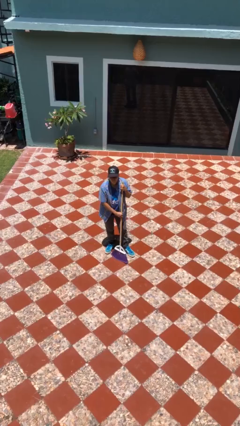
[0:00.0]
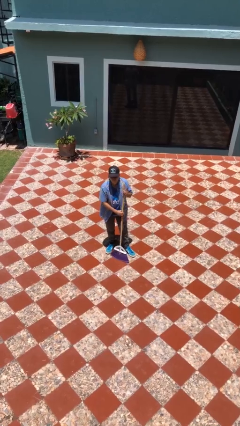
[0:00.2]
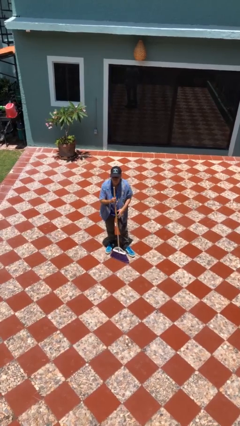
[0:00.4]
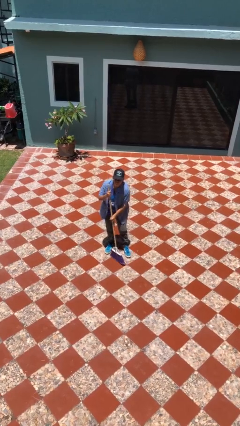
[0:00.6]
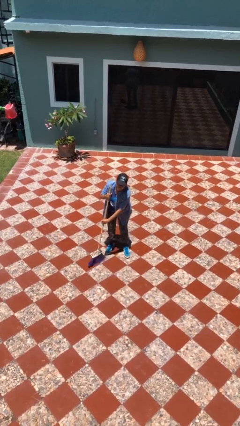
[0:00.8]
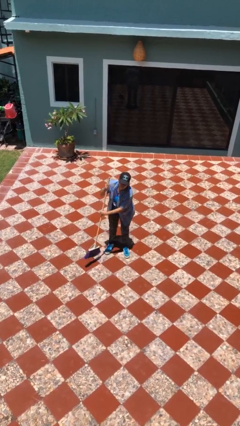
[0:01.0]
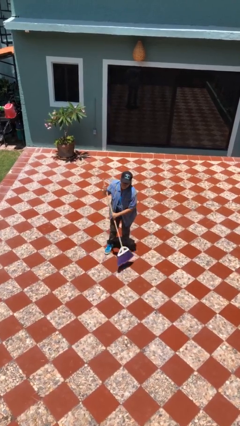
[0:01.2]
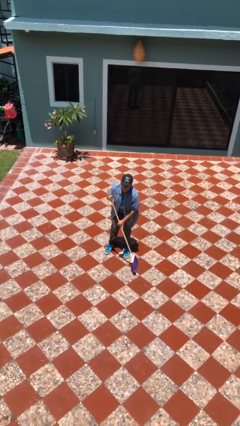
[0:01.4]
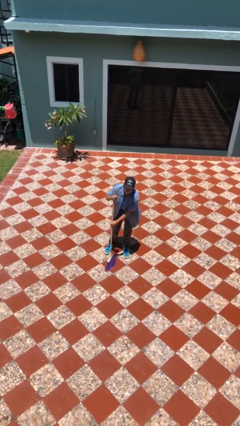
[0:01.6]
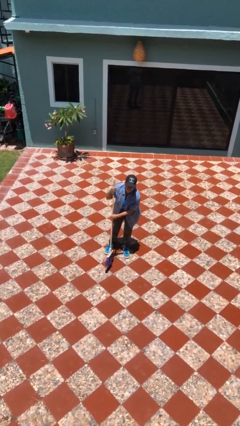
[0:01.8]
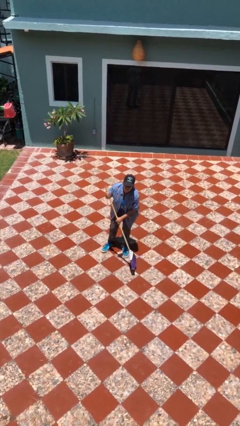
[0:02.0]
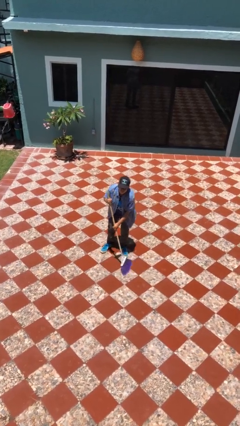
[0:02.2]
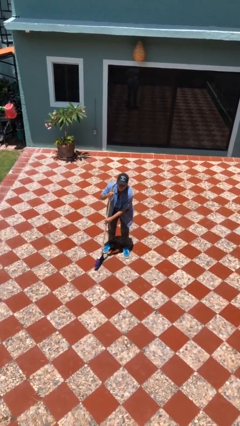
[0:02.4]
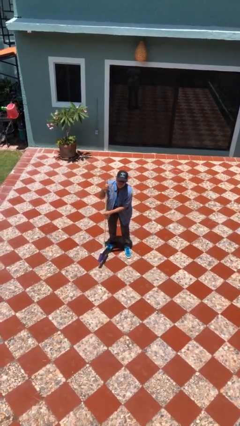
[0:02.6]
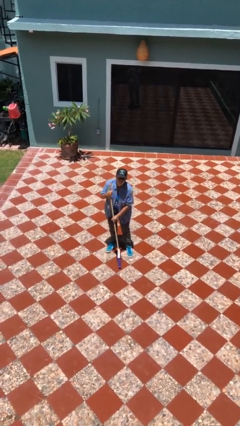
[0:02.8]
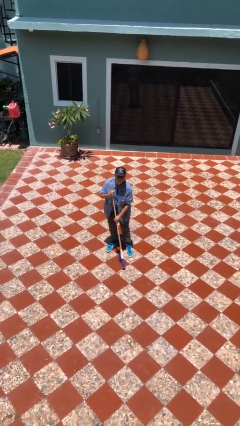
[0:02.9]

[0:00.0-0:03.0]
person sweeps floor

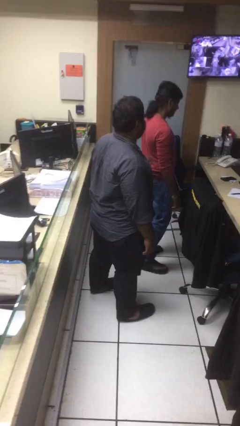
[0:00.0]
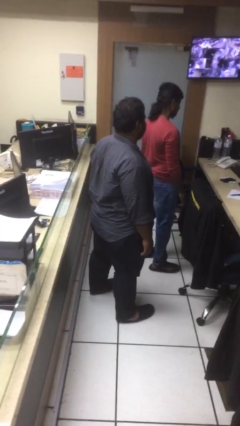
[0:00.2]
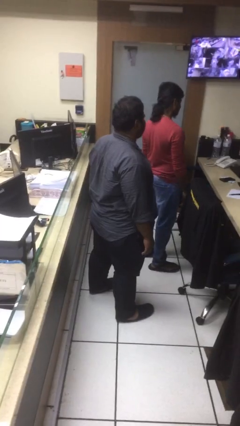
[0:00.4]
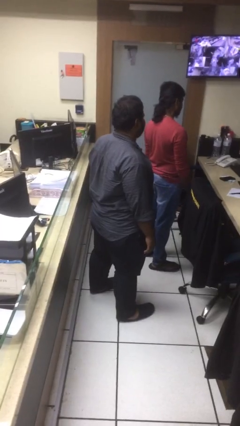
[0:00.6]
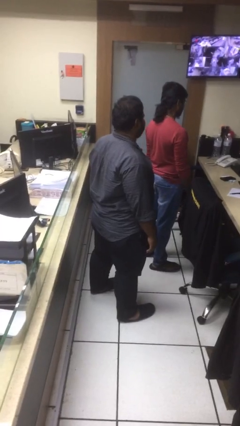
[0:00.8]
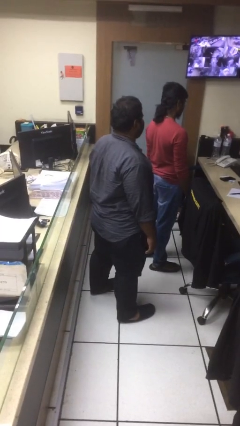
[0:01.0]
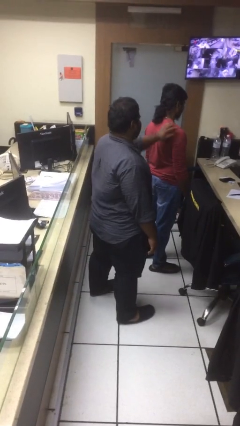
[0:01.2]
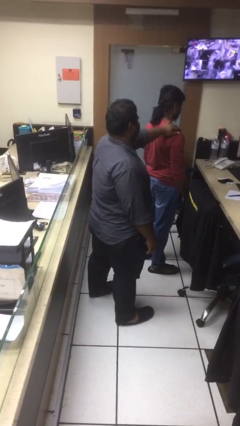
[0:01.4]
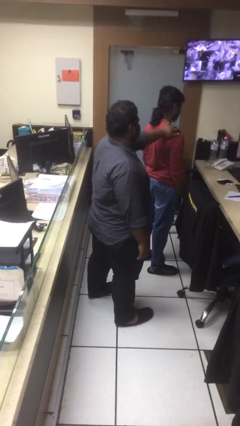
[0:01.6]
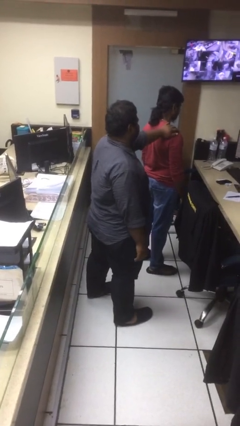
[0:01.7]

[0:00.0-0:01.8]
person grabs person by shoulder

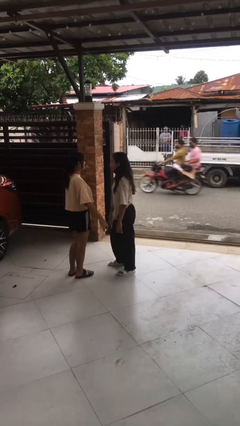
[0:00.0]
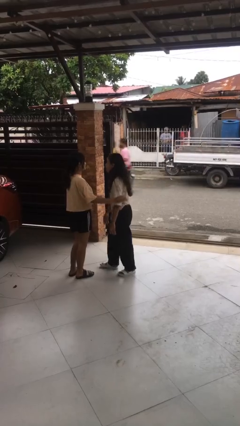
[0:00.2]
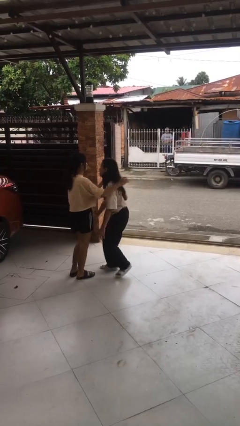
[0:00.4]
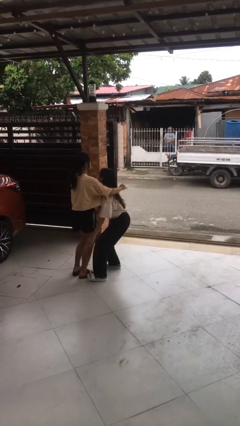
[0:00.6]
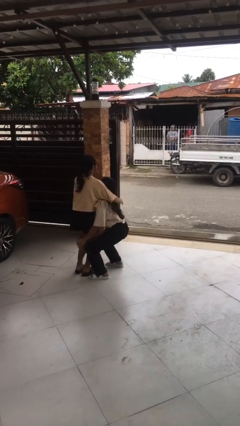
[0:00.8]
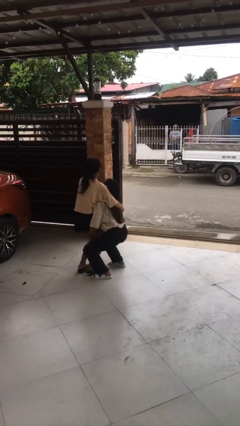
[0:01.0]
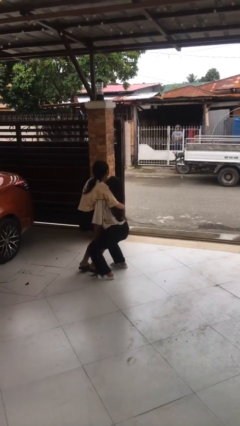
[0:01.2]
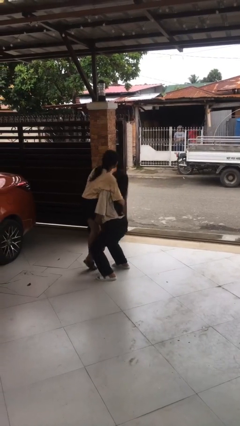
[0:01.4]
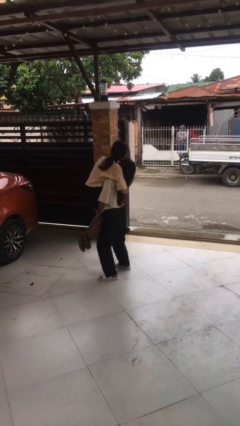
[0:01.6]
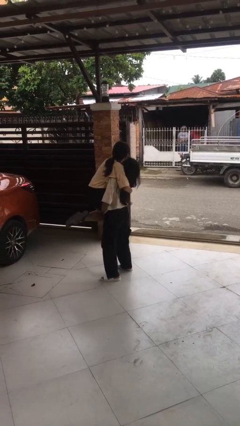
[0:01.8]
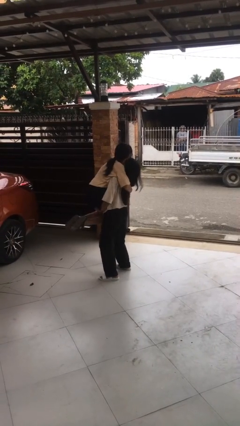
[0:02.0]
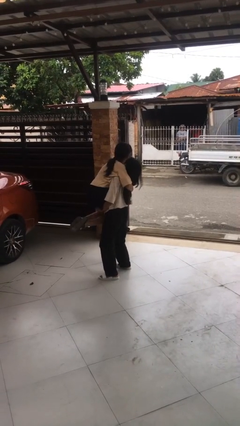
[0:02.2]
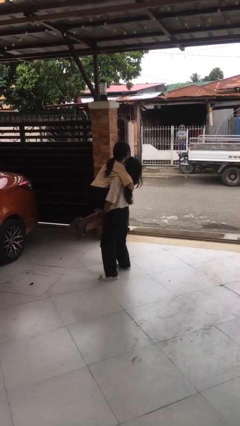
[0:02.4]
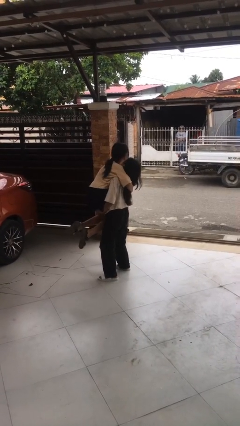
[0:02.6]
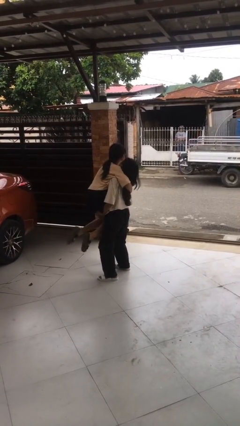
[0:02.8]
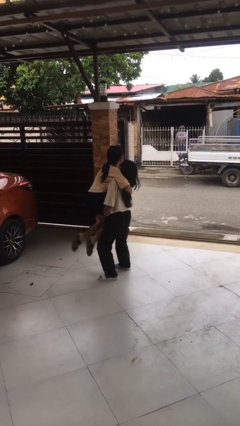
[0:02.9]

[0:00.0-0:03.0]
person picks up person

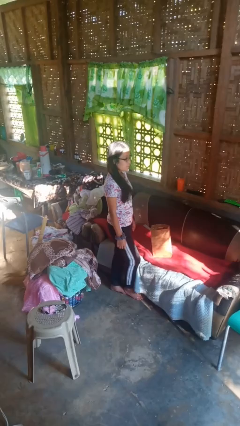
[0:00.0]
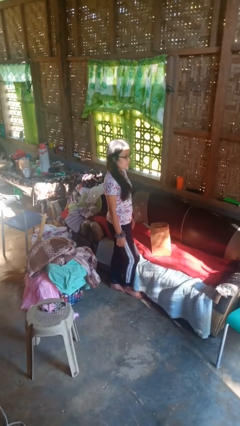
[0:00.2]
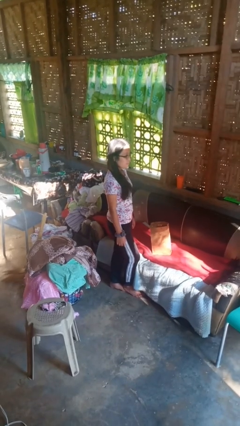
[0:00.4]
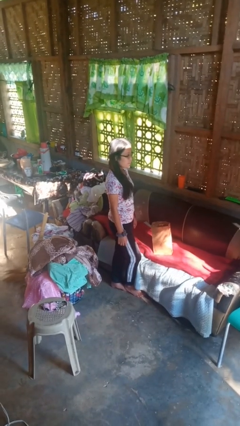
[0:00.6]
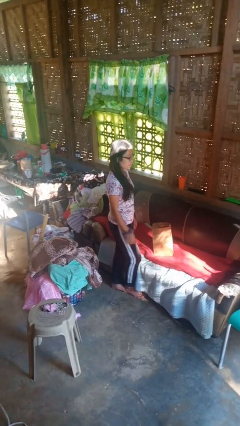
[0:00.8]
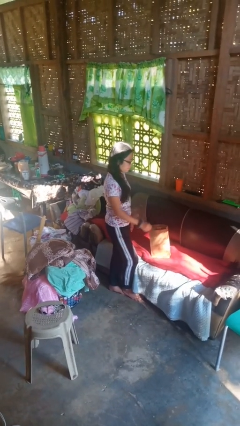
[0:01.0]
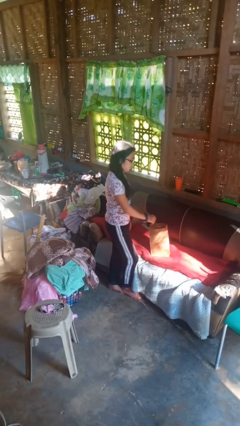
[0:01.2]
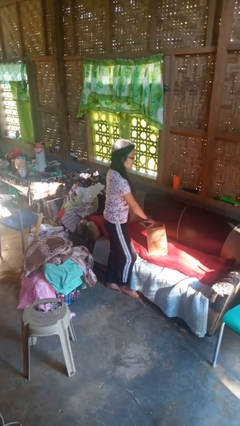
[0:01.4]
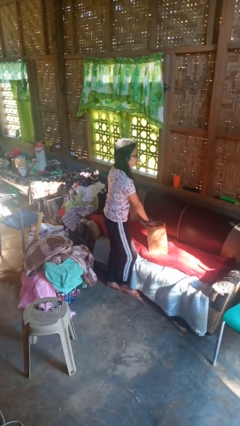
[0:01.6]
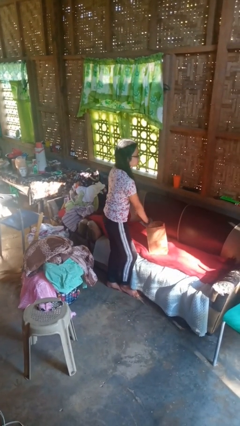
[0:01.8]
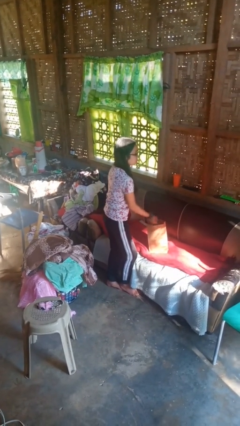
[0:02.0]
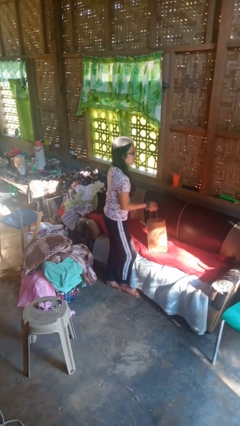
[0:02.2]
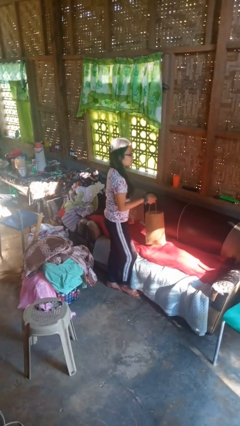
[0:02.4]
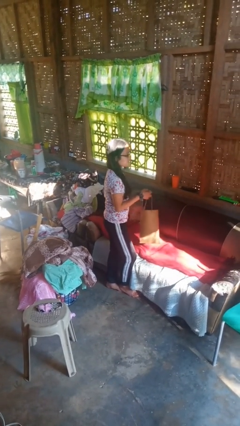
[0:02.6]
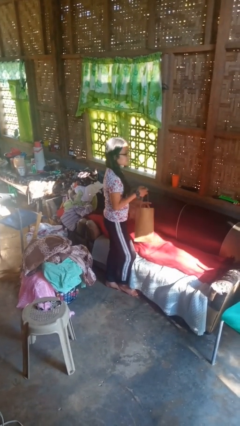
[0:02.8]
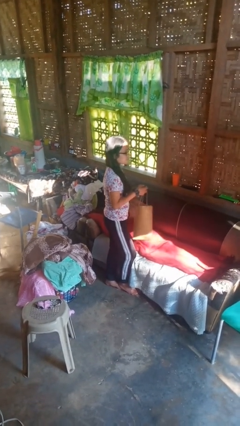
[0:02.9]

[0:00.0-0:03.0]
person picks up object from couch

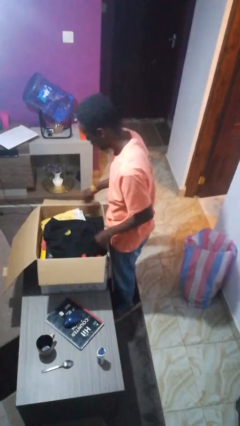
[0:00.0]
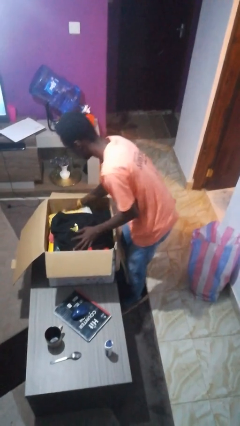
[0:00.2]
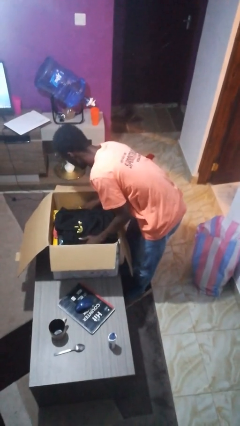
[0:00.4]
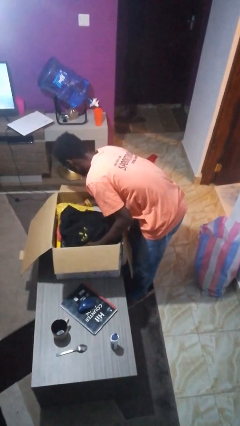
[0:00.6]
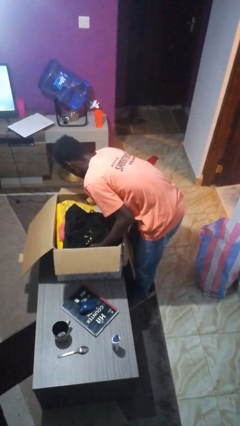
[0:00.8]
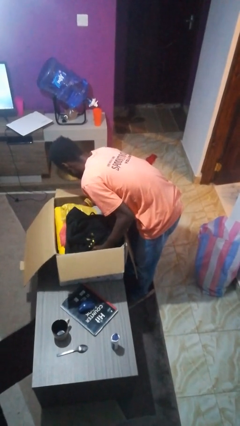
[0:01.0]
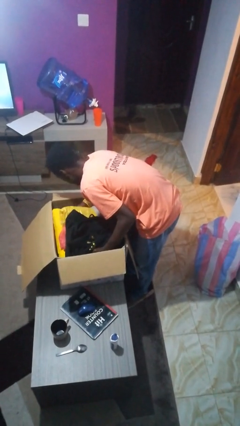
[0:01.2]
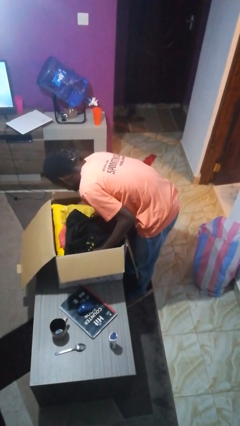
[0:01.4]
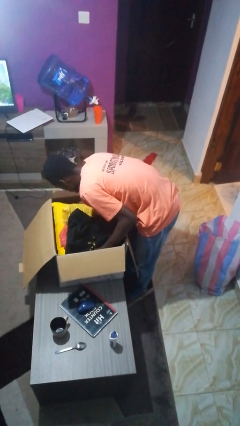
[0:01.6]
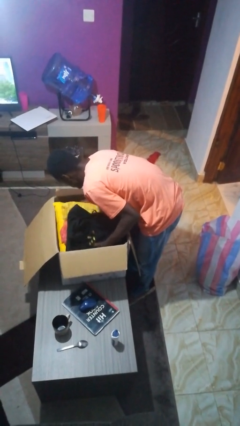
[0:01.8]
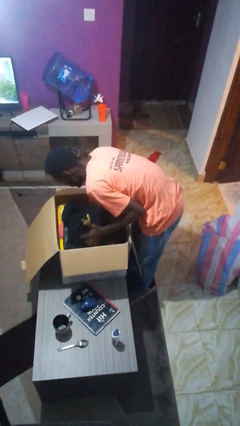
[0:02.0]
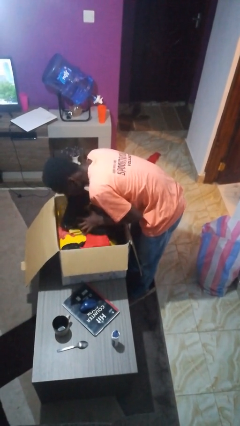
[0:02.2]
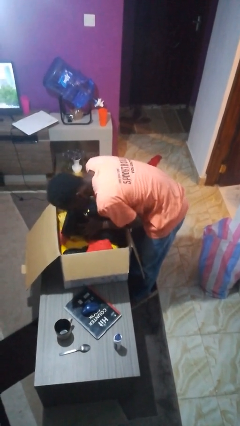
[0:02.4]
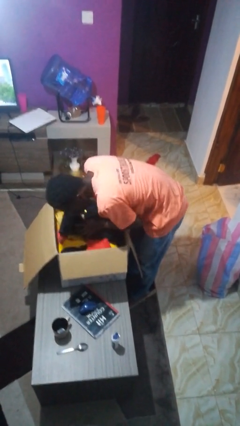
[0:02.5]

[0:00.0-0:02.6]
person searches in box

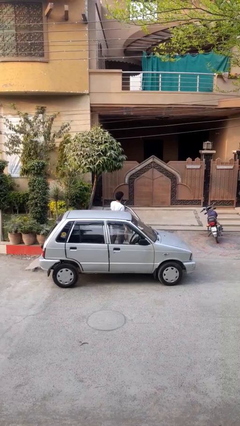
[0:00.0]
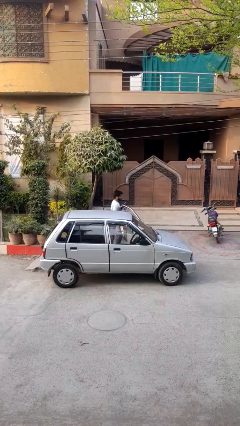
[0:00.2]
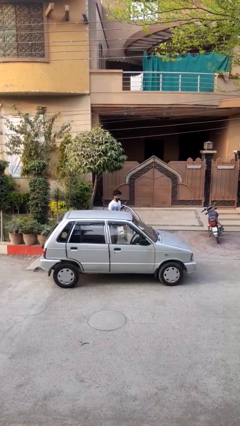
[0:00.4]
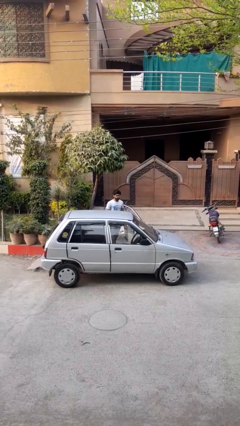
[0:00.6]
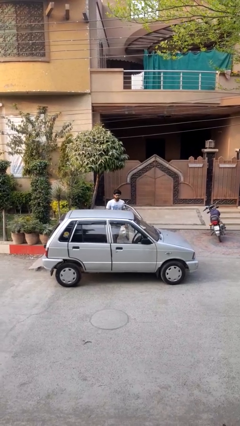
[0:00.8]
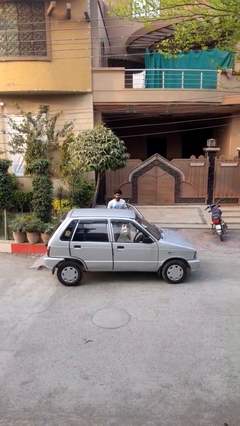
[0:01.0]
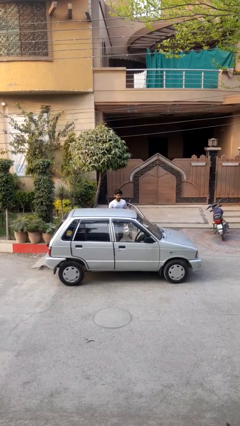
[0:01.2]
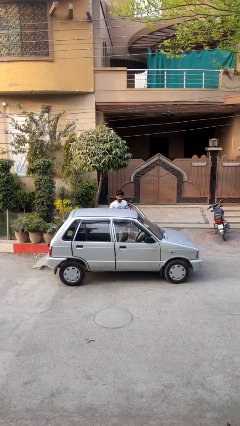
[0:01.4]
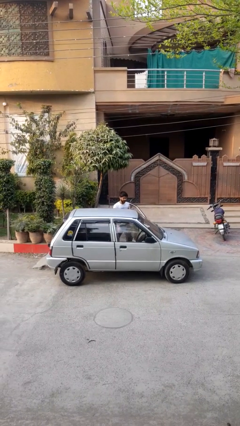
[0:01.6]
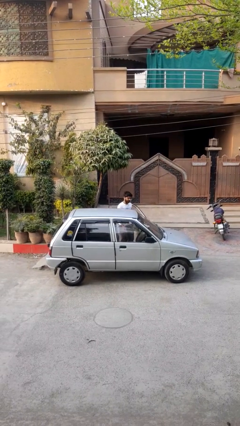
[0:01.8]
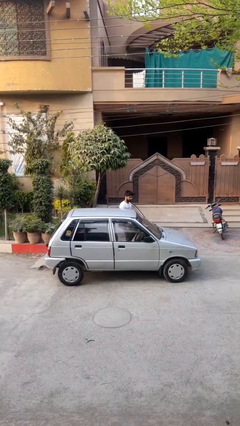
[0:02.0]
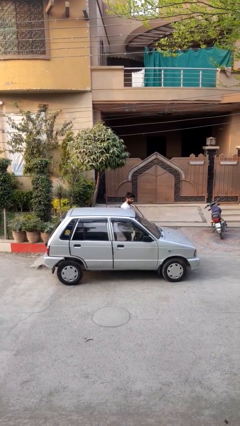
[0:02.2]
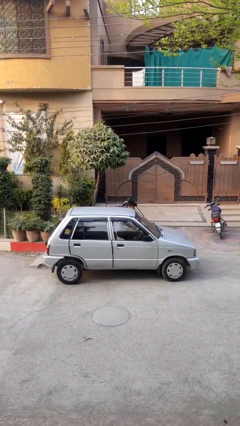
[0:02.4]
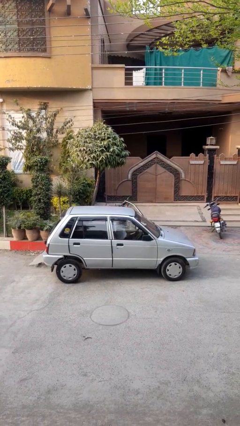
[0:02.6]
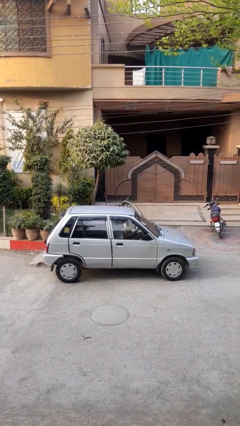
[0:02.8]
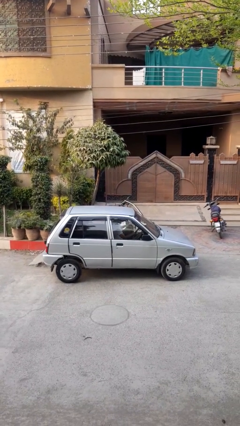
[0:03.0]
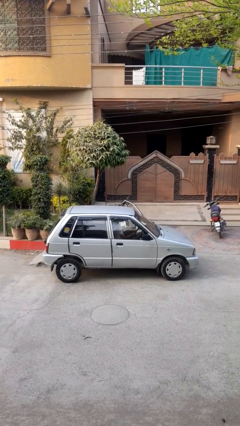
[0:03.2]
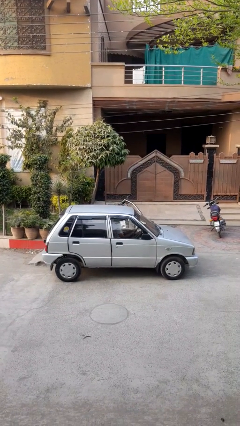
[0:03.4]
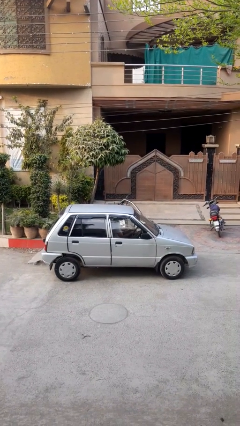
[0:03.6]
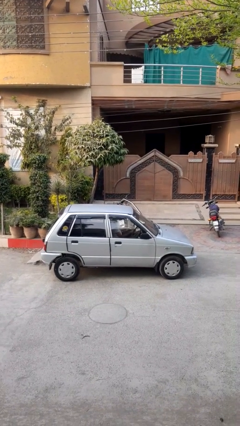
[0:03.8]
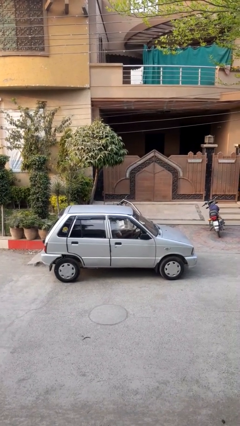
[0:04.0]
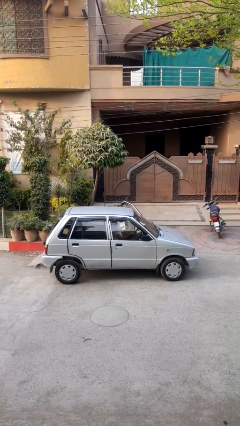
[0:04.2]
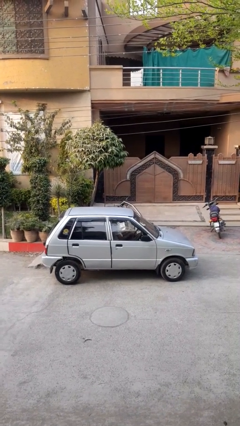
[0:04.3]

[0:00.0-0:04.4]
person enters car
